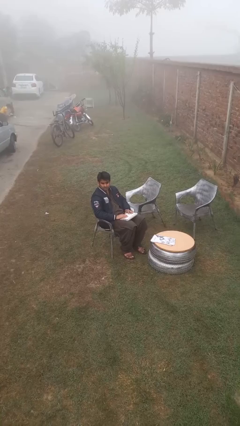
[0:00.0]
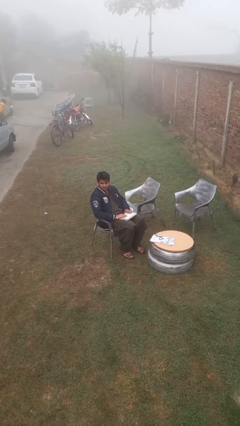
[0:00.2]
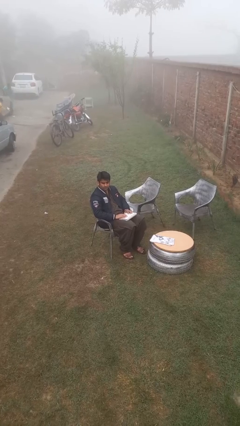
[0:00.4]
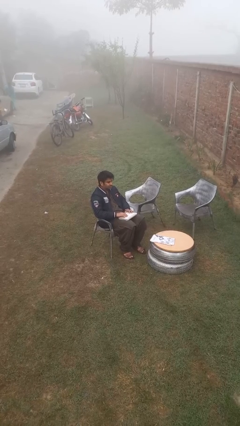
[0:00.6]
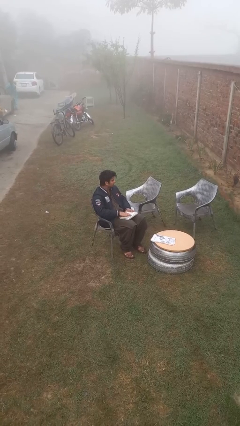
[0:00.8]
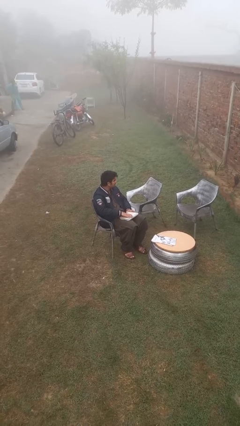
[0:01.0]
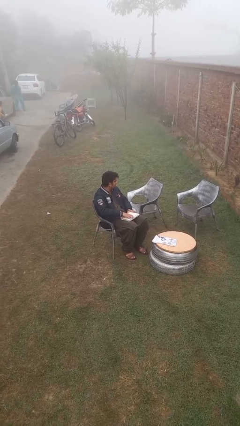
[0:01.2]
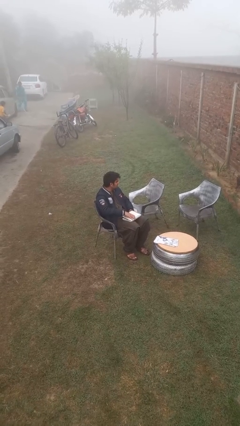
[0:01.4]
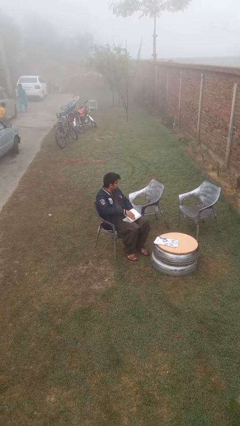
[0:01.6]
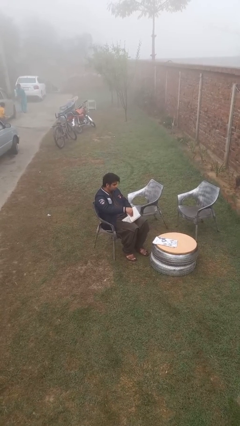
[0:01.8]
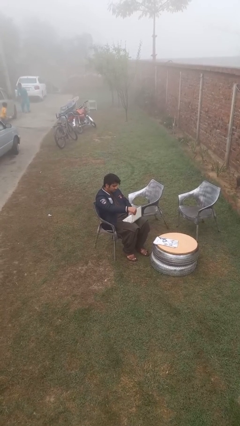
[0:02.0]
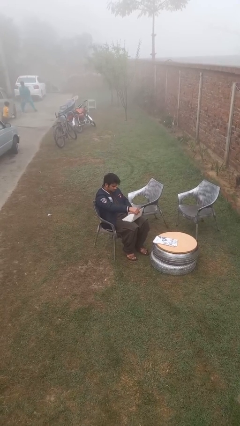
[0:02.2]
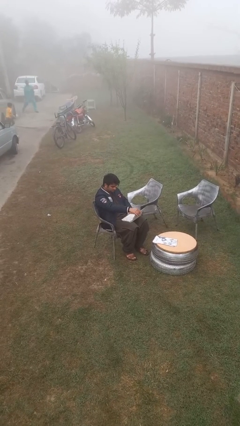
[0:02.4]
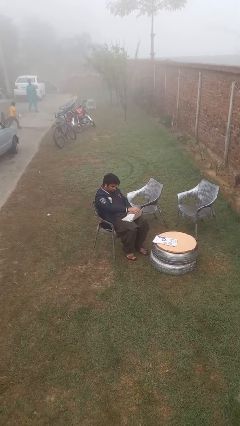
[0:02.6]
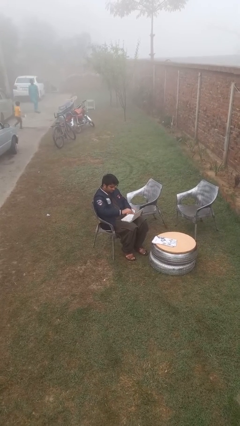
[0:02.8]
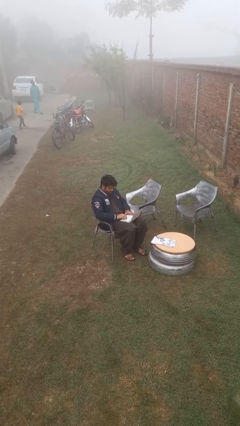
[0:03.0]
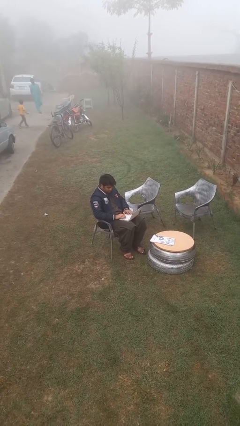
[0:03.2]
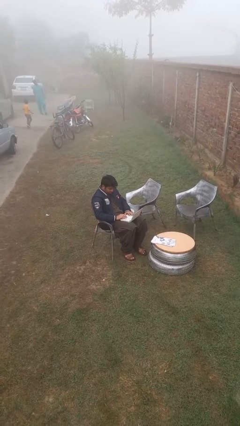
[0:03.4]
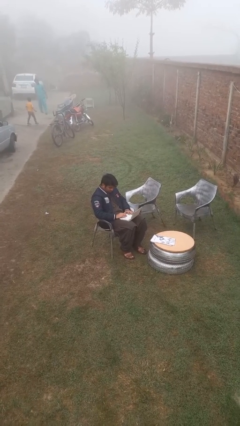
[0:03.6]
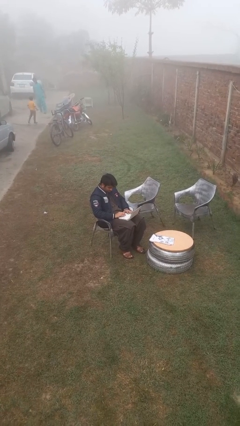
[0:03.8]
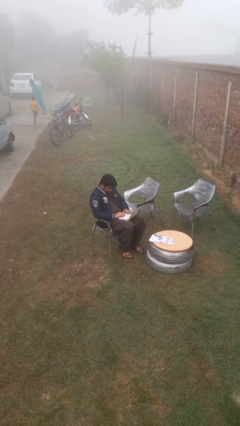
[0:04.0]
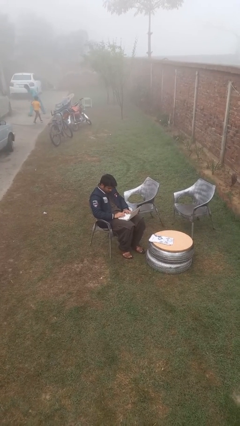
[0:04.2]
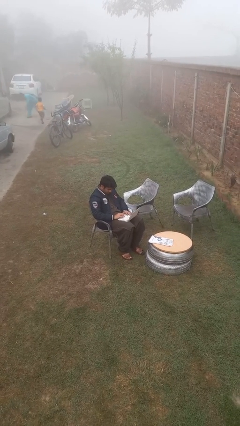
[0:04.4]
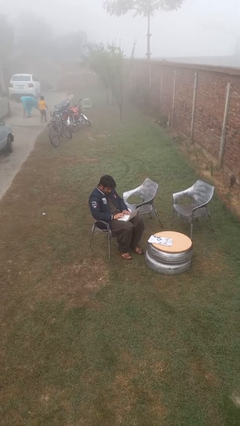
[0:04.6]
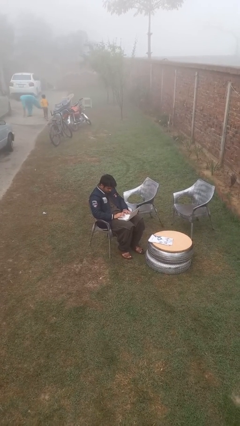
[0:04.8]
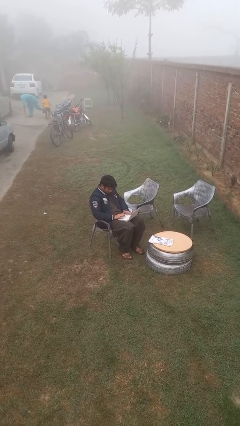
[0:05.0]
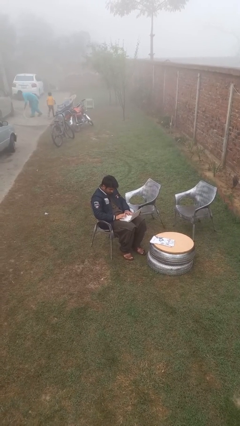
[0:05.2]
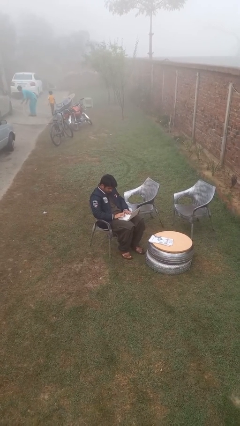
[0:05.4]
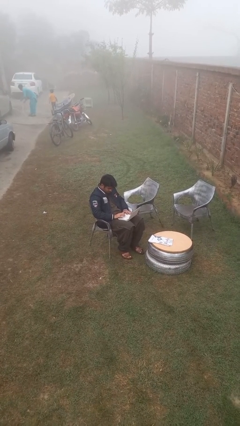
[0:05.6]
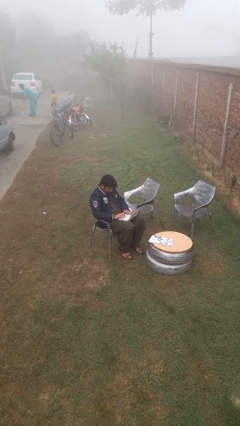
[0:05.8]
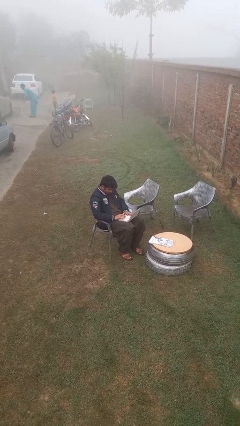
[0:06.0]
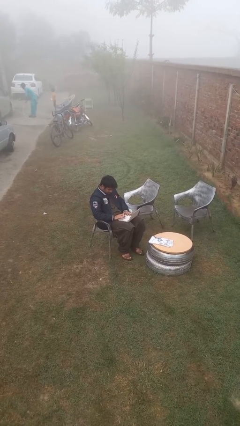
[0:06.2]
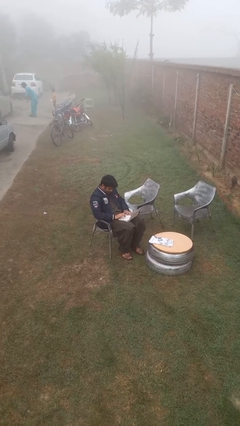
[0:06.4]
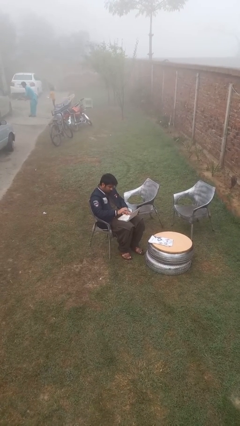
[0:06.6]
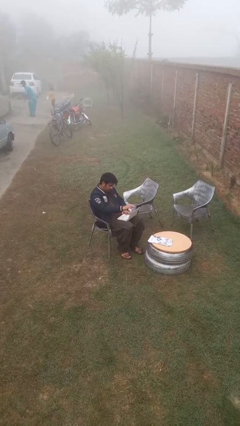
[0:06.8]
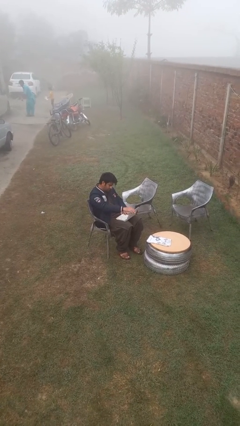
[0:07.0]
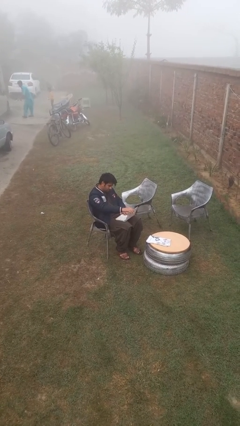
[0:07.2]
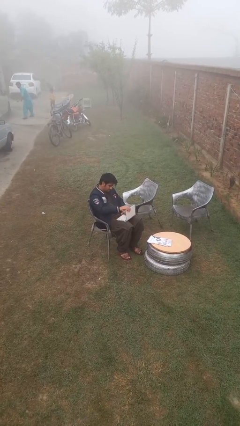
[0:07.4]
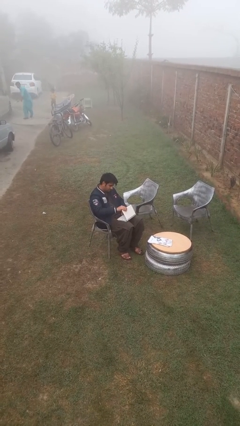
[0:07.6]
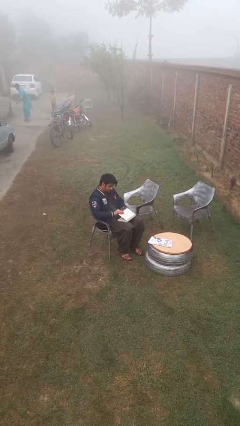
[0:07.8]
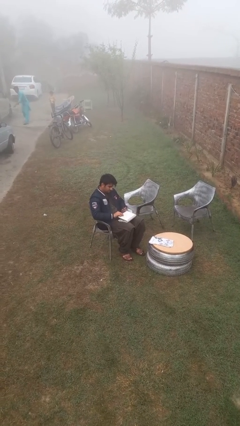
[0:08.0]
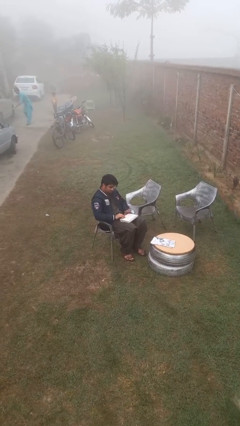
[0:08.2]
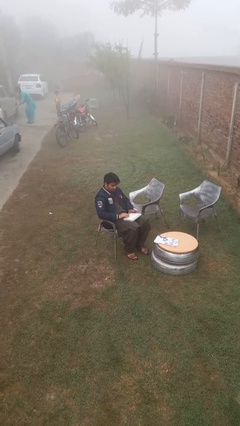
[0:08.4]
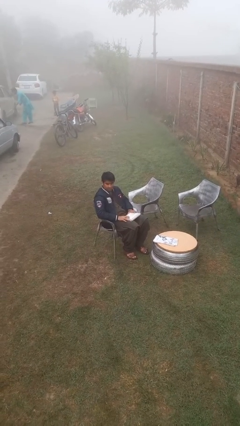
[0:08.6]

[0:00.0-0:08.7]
person interacts with laptop

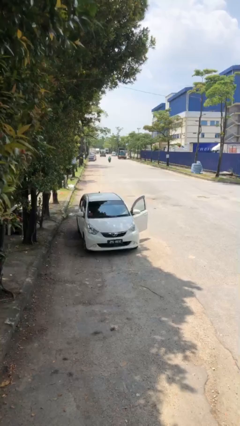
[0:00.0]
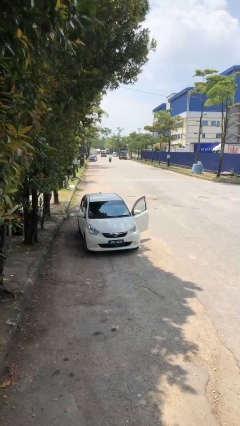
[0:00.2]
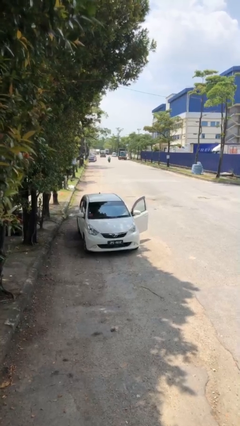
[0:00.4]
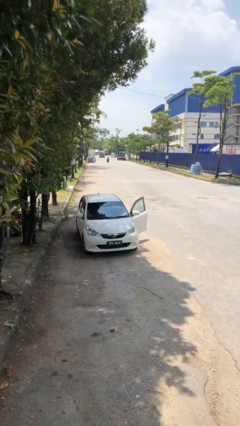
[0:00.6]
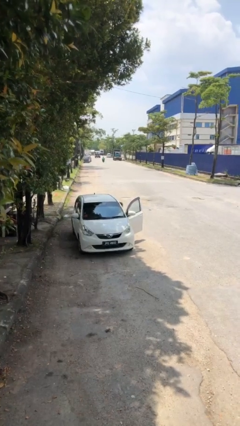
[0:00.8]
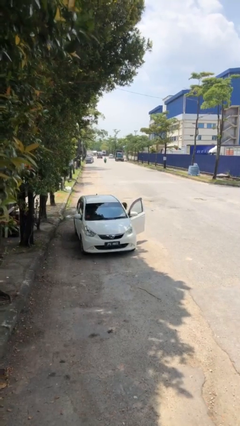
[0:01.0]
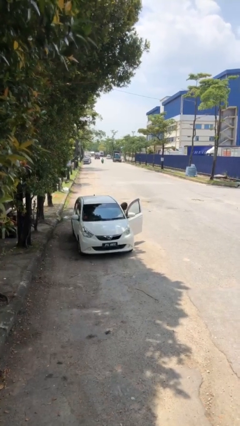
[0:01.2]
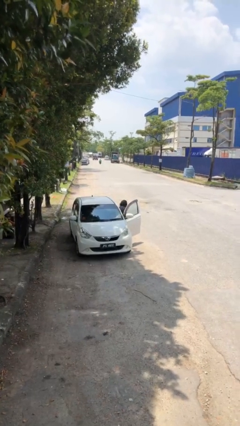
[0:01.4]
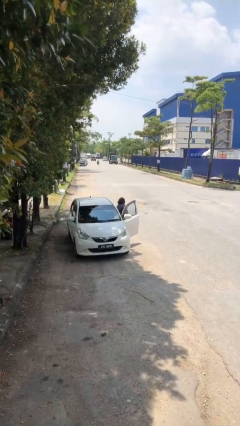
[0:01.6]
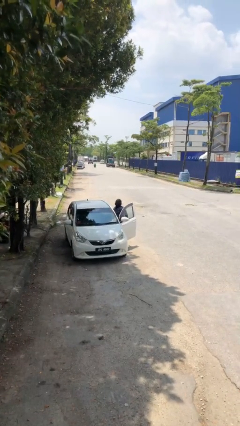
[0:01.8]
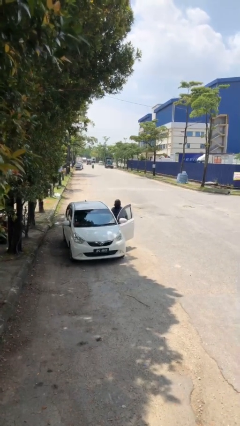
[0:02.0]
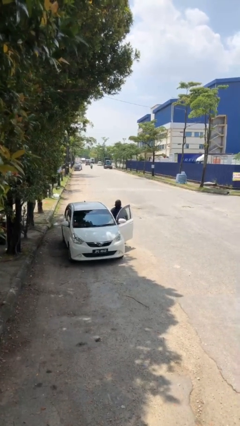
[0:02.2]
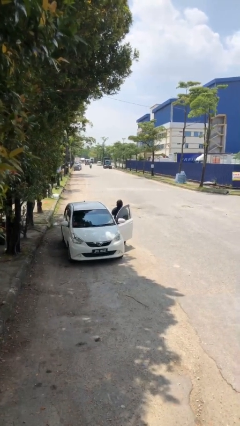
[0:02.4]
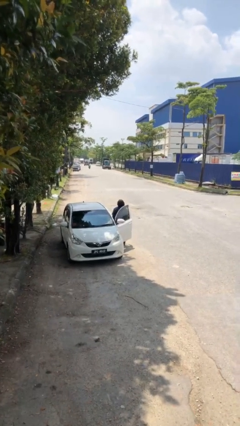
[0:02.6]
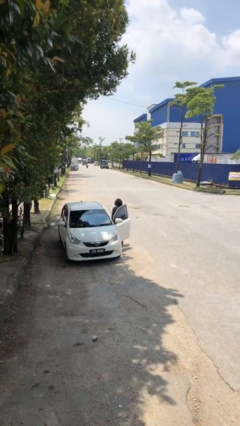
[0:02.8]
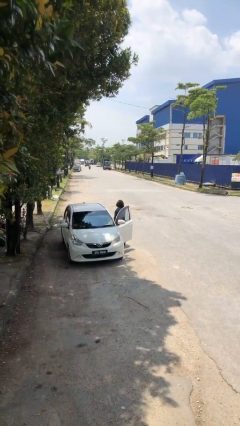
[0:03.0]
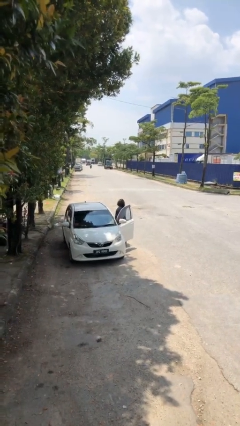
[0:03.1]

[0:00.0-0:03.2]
person exits car

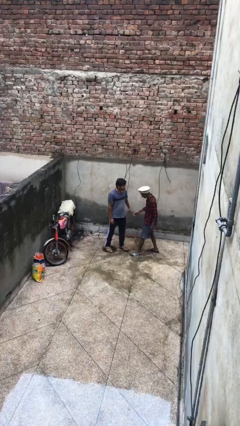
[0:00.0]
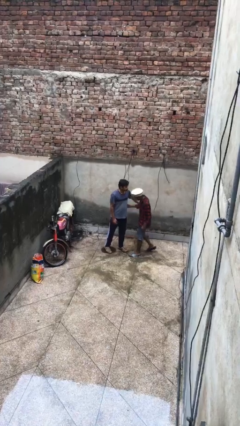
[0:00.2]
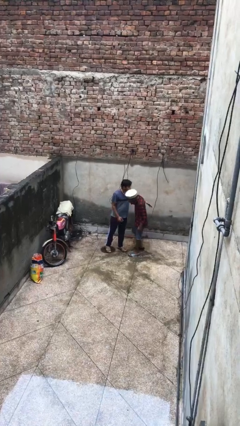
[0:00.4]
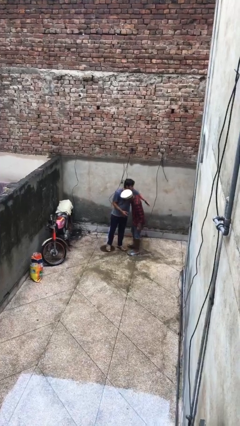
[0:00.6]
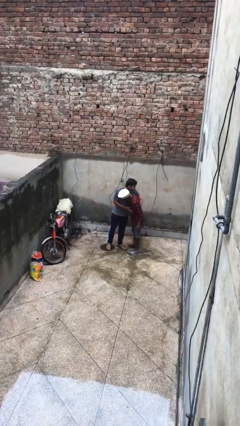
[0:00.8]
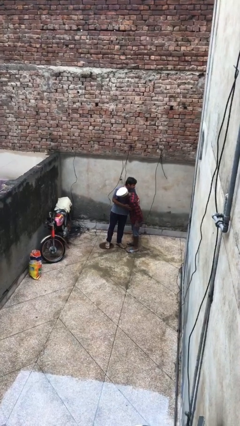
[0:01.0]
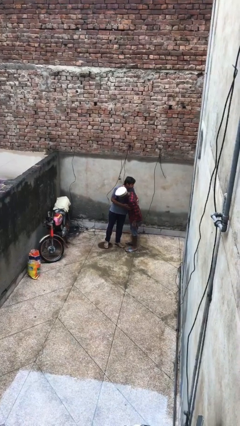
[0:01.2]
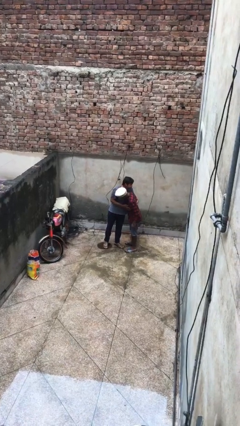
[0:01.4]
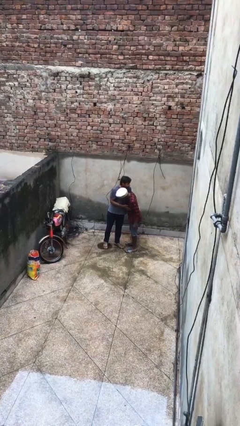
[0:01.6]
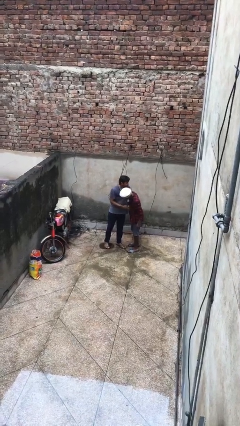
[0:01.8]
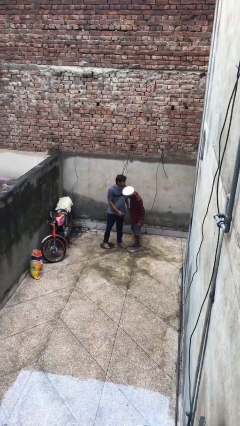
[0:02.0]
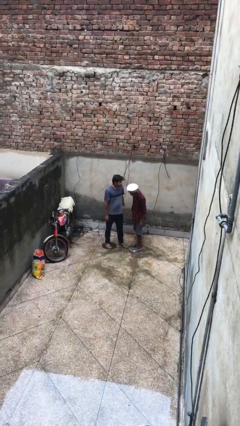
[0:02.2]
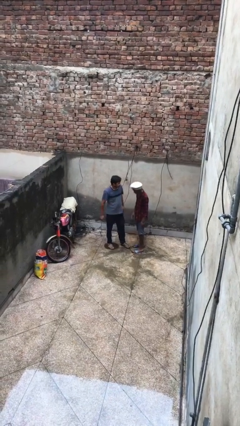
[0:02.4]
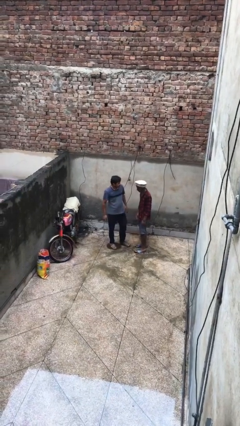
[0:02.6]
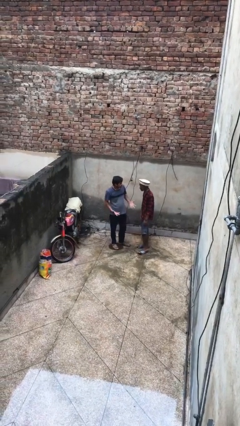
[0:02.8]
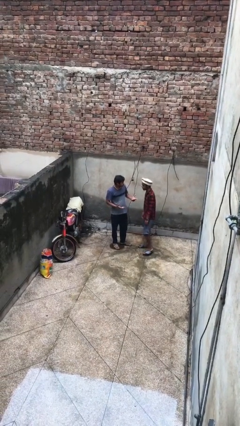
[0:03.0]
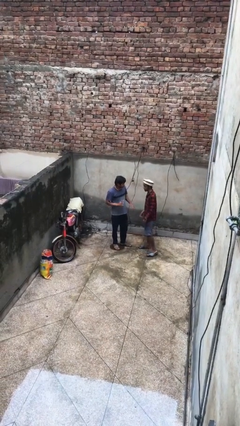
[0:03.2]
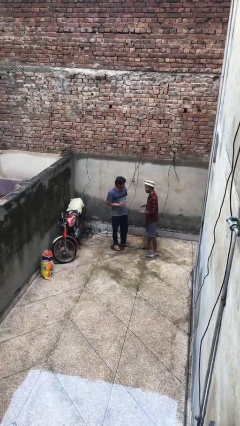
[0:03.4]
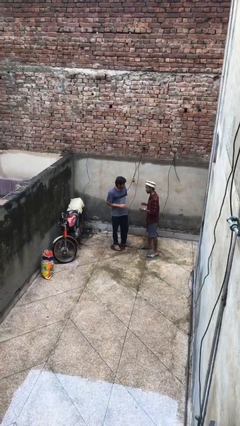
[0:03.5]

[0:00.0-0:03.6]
person embraces person

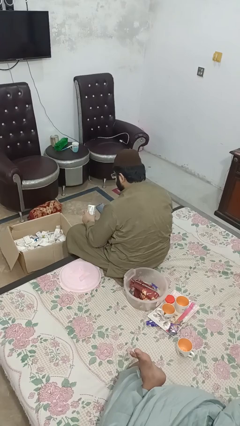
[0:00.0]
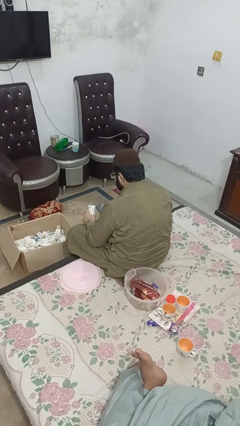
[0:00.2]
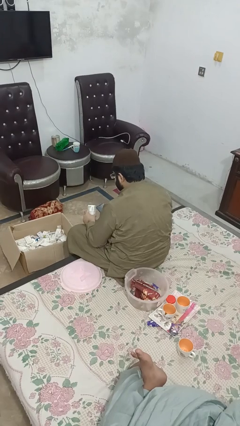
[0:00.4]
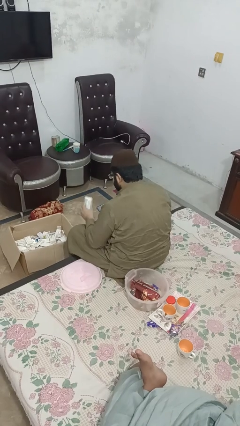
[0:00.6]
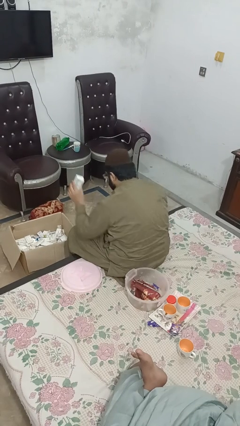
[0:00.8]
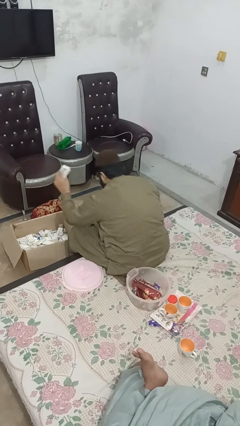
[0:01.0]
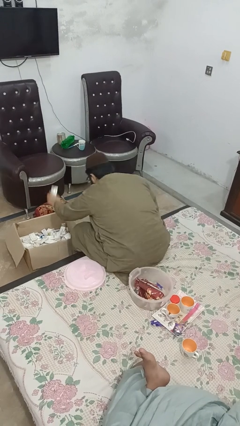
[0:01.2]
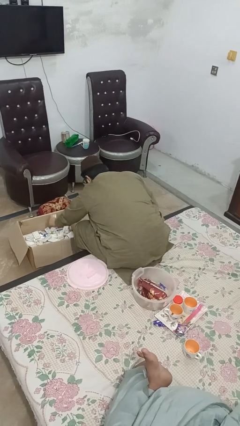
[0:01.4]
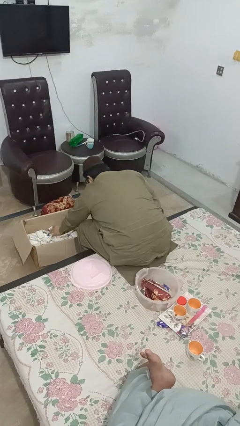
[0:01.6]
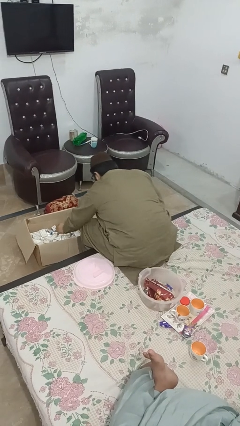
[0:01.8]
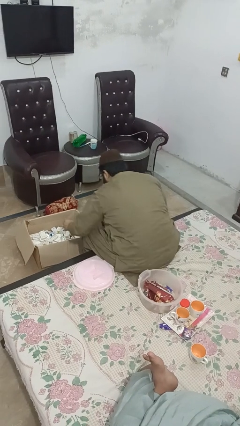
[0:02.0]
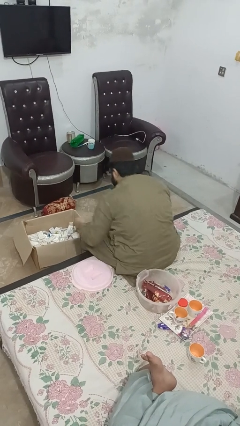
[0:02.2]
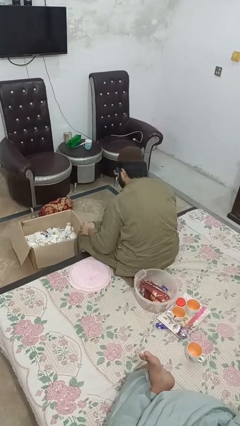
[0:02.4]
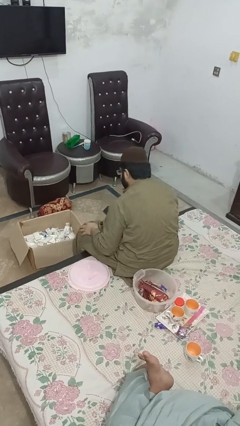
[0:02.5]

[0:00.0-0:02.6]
person puts object into box
